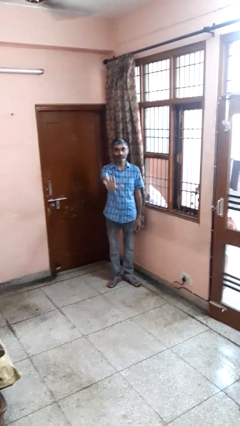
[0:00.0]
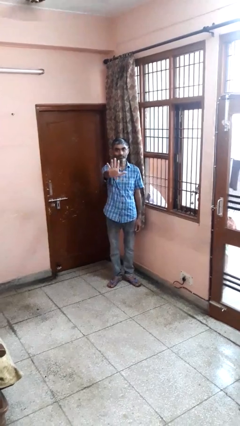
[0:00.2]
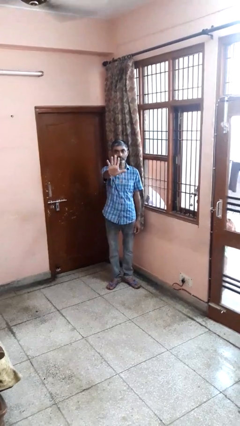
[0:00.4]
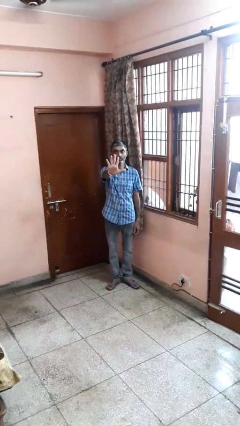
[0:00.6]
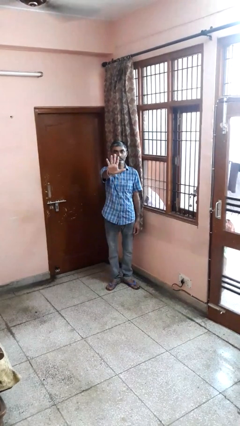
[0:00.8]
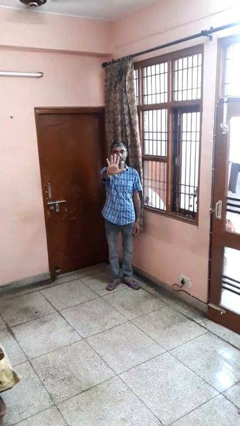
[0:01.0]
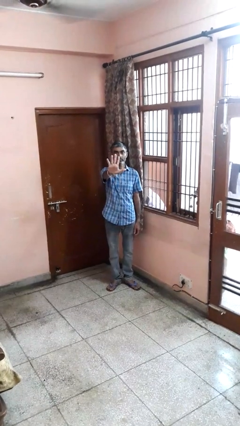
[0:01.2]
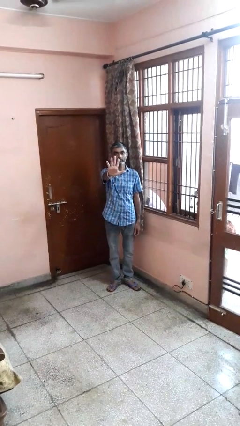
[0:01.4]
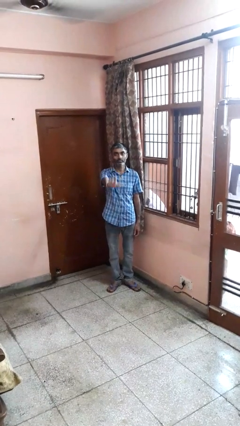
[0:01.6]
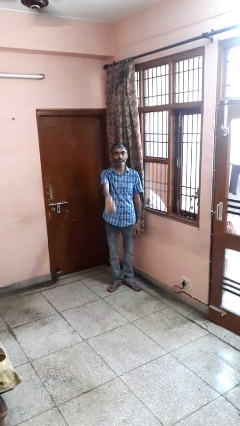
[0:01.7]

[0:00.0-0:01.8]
person gestures number five

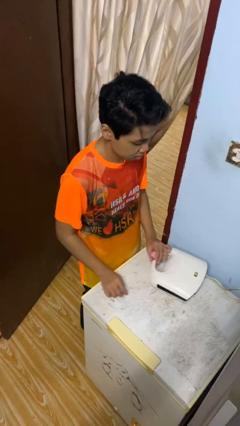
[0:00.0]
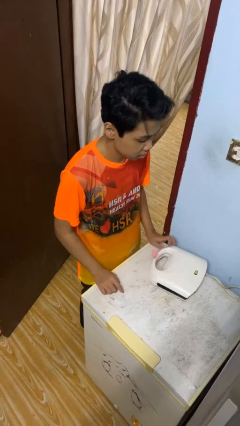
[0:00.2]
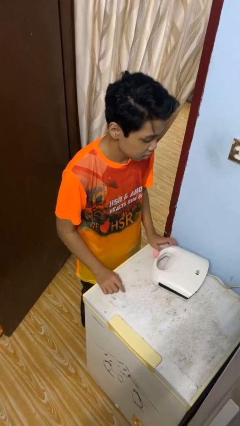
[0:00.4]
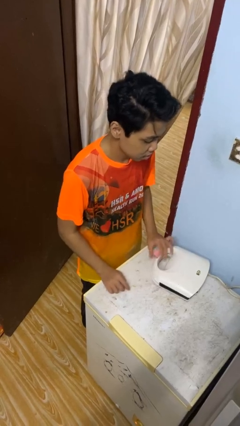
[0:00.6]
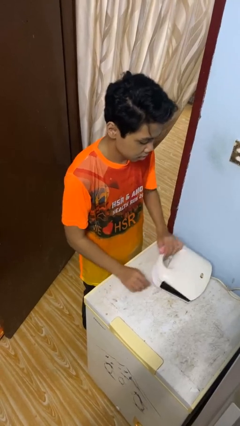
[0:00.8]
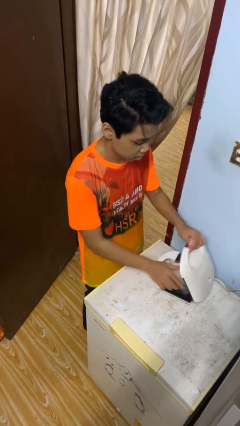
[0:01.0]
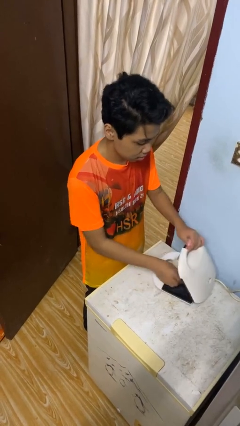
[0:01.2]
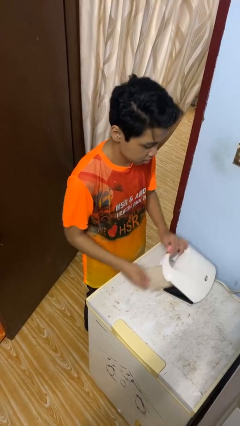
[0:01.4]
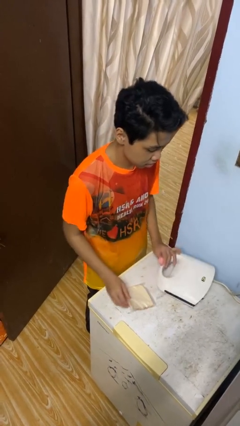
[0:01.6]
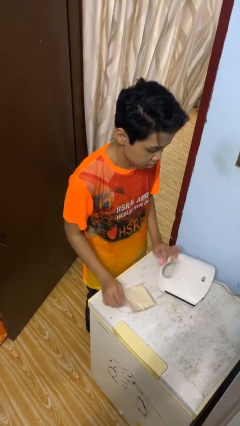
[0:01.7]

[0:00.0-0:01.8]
person takes object from toaster

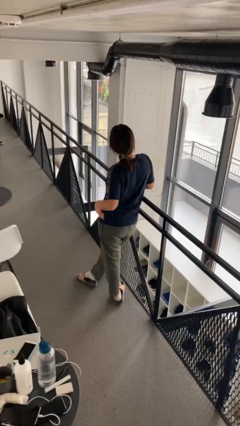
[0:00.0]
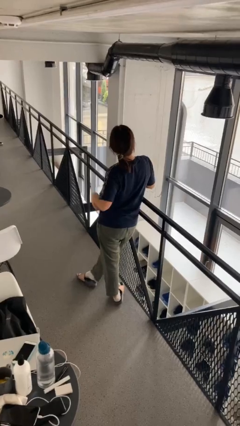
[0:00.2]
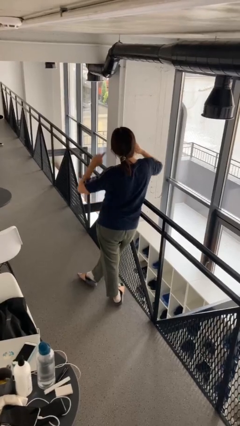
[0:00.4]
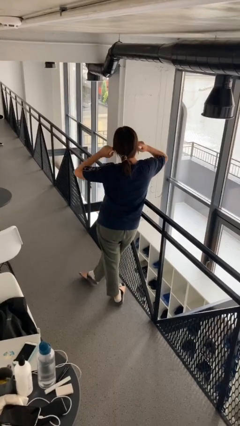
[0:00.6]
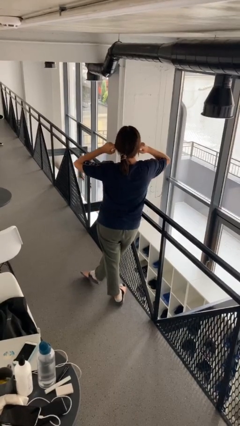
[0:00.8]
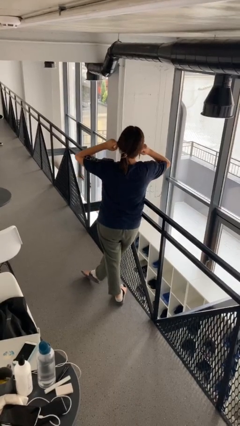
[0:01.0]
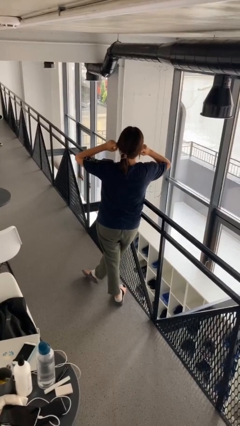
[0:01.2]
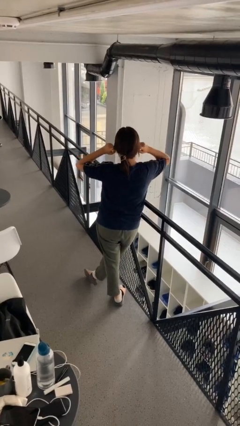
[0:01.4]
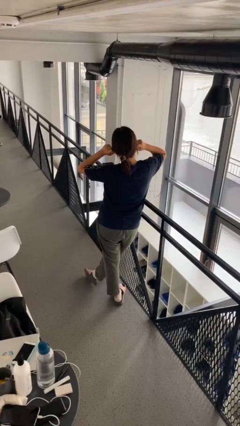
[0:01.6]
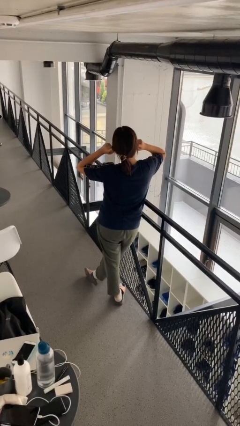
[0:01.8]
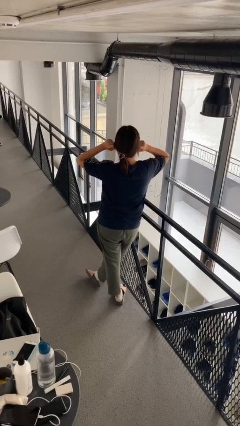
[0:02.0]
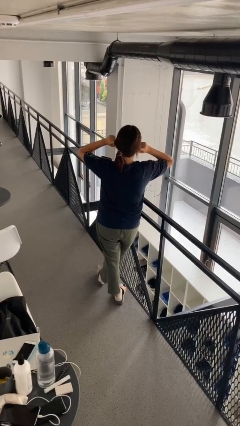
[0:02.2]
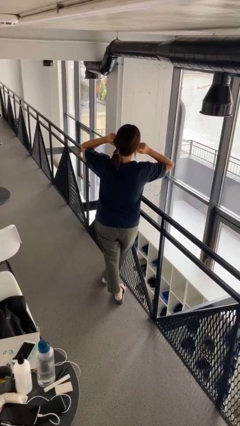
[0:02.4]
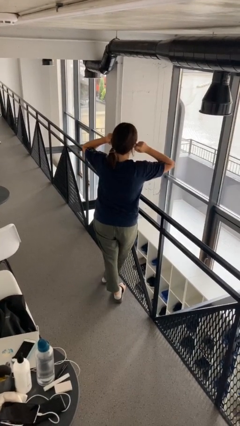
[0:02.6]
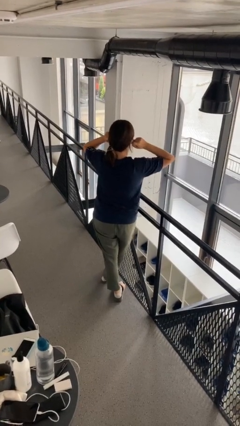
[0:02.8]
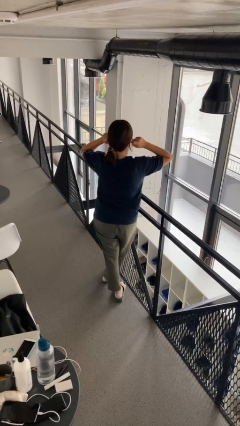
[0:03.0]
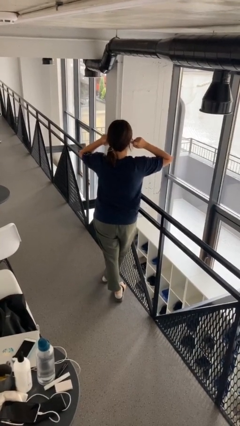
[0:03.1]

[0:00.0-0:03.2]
person puts fingers in ear

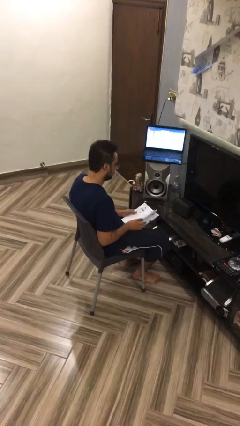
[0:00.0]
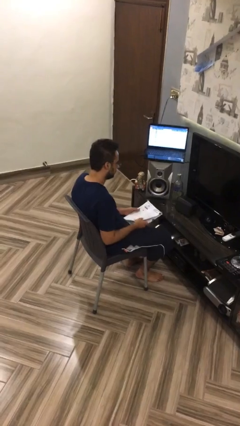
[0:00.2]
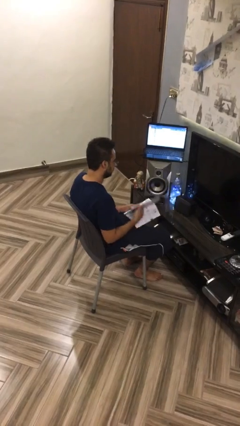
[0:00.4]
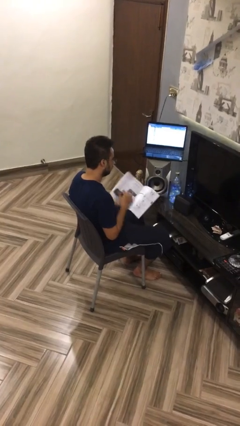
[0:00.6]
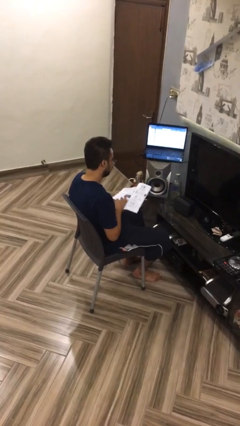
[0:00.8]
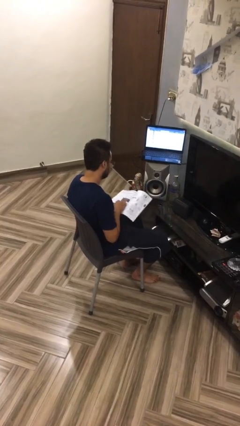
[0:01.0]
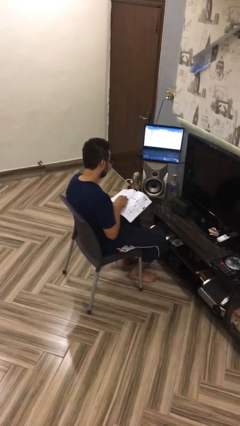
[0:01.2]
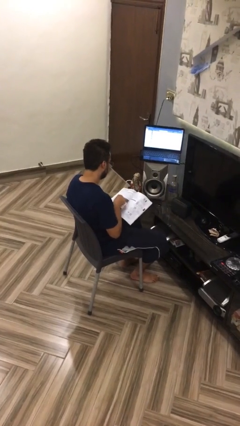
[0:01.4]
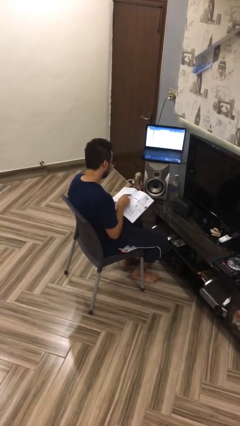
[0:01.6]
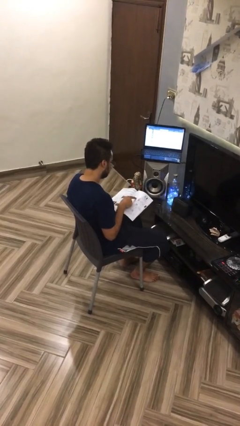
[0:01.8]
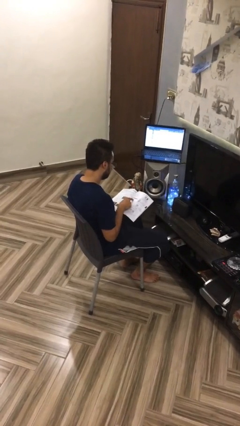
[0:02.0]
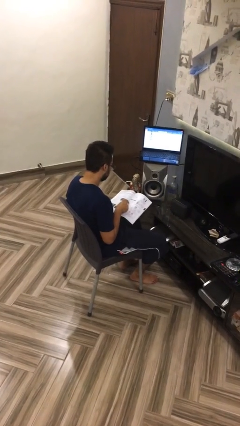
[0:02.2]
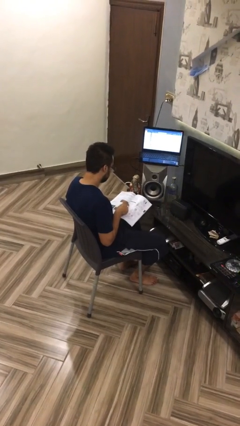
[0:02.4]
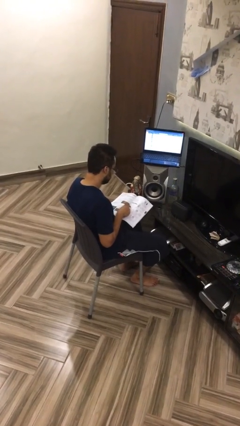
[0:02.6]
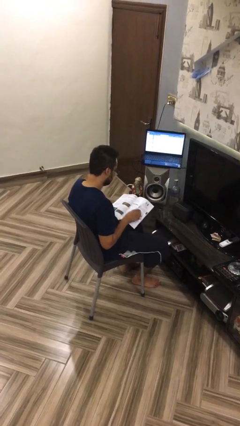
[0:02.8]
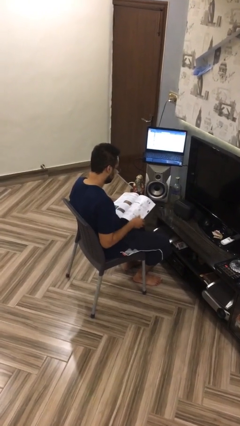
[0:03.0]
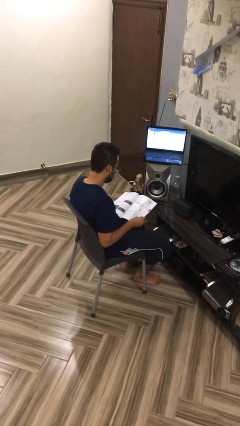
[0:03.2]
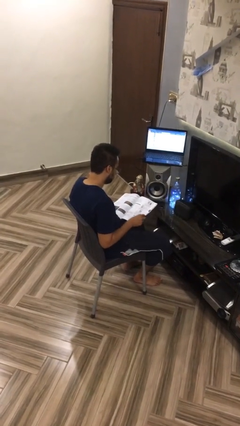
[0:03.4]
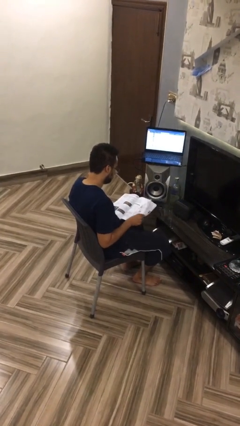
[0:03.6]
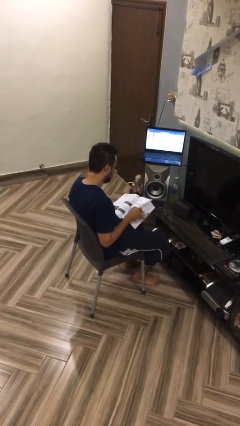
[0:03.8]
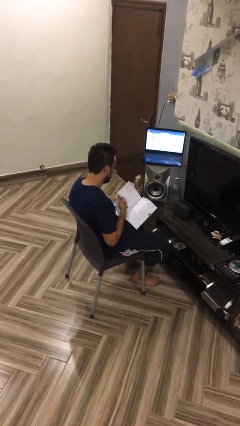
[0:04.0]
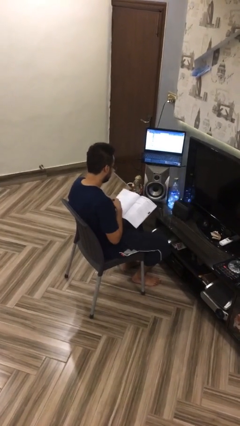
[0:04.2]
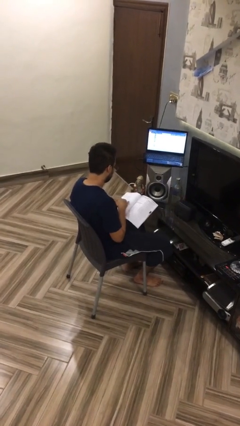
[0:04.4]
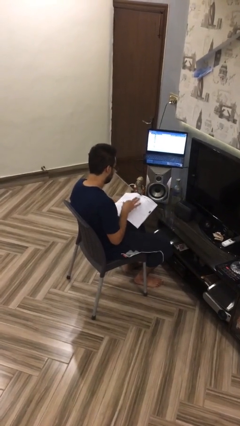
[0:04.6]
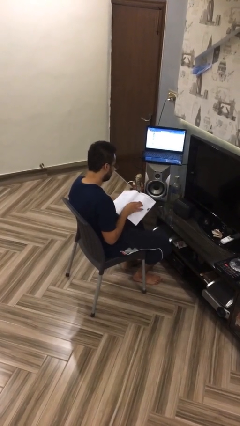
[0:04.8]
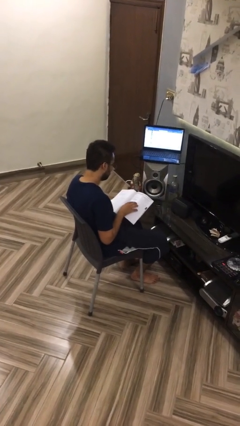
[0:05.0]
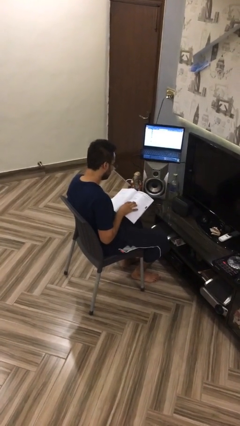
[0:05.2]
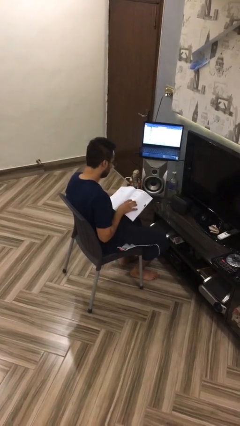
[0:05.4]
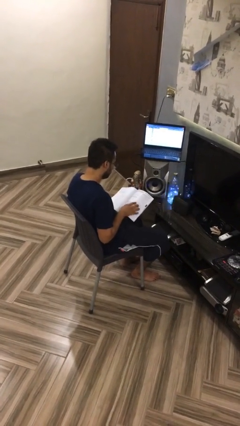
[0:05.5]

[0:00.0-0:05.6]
person reads document

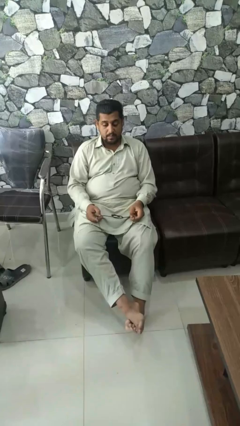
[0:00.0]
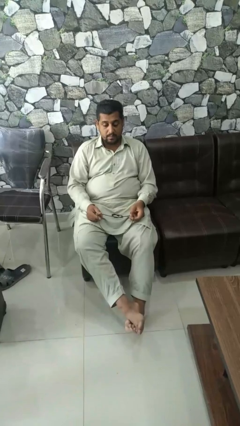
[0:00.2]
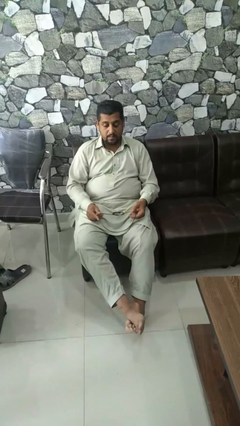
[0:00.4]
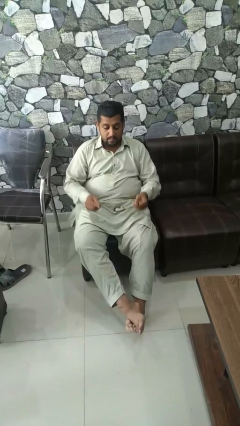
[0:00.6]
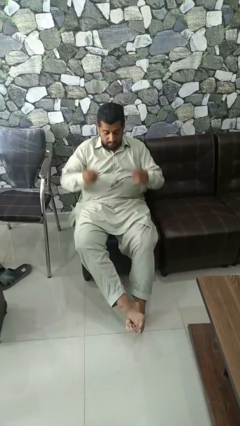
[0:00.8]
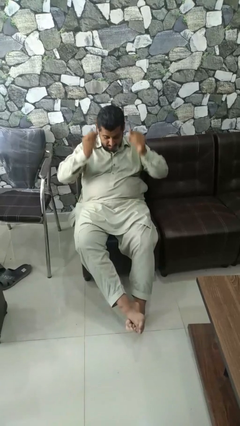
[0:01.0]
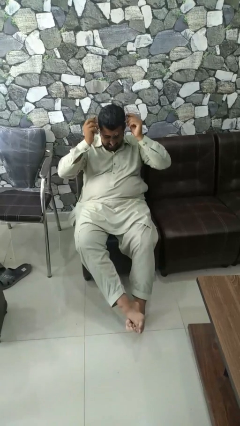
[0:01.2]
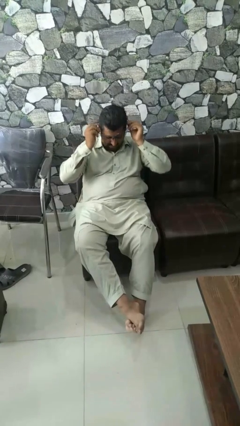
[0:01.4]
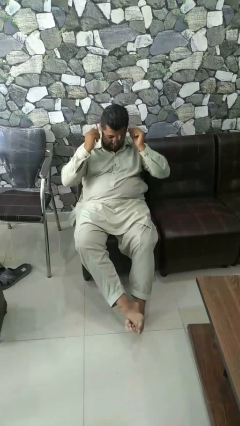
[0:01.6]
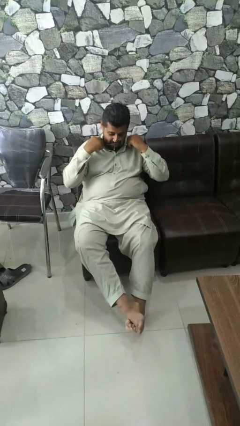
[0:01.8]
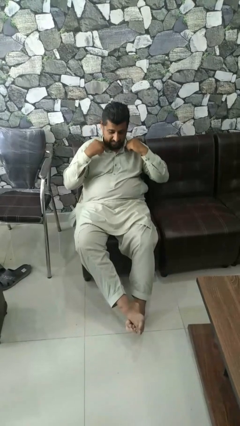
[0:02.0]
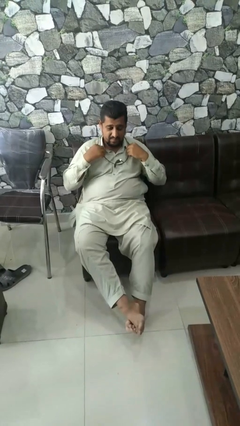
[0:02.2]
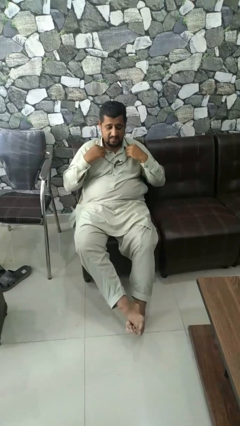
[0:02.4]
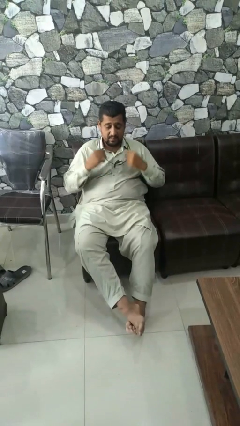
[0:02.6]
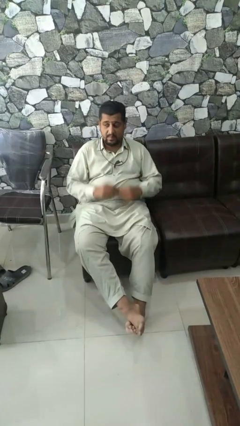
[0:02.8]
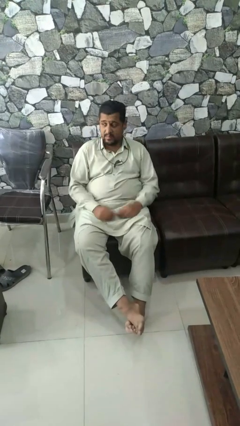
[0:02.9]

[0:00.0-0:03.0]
person puts on necklace

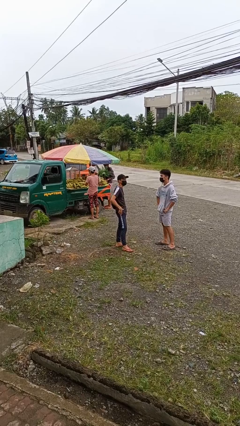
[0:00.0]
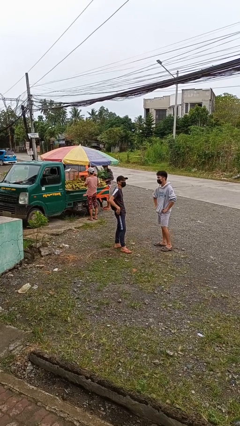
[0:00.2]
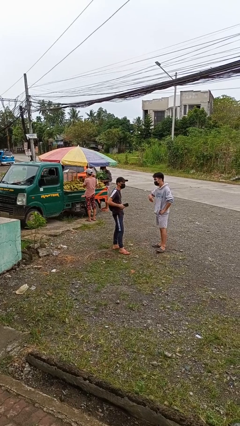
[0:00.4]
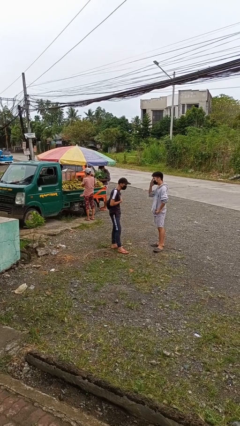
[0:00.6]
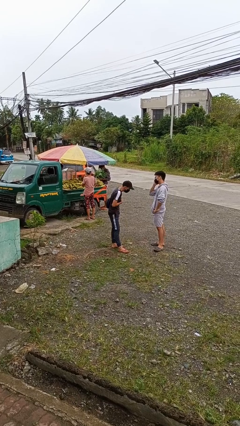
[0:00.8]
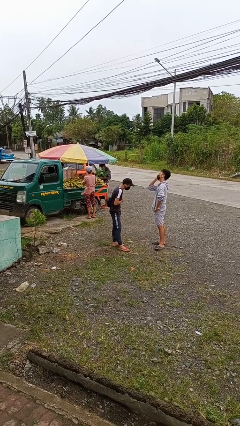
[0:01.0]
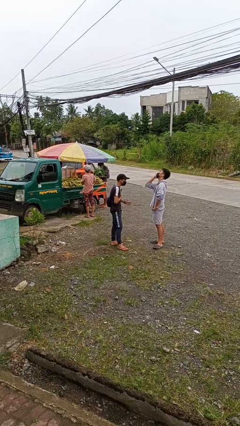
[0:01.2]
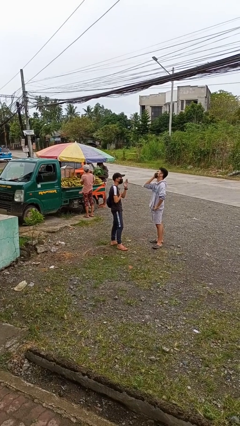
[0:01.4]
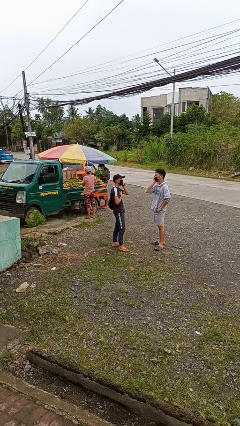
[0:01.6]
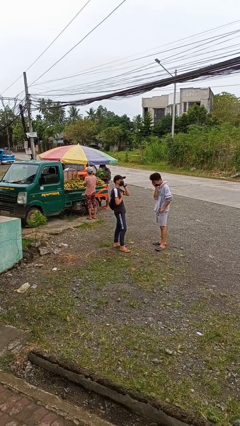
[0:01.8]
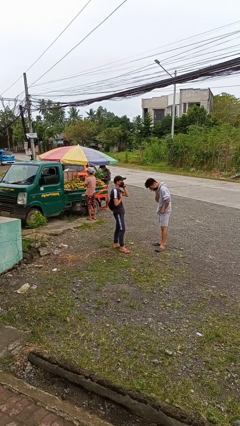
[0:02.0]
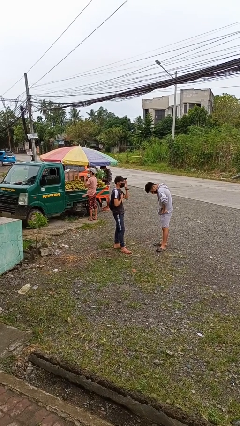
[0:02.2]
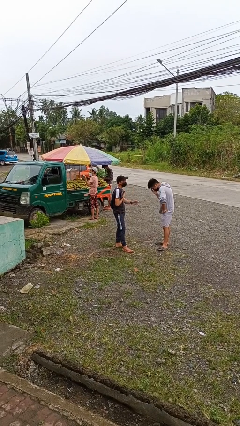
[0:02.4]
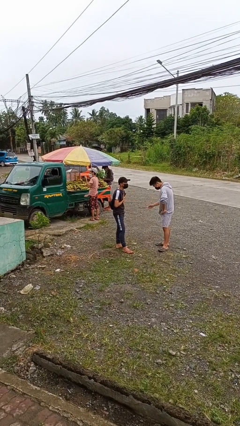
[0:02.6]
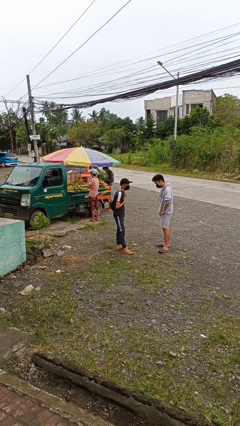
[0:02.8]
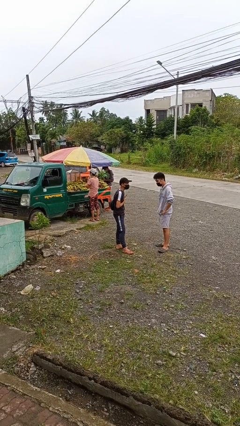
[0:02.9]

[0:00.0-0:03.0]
person laughs with person
